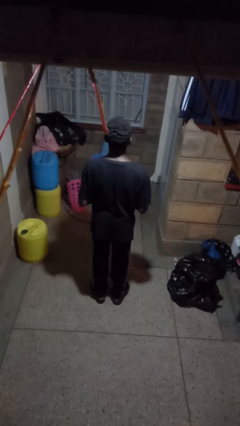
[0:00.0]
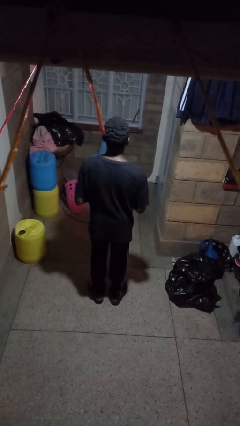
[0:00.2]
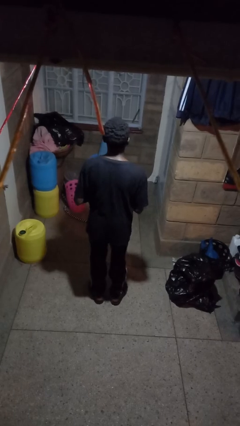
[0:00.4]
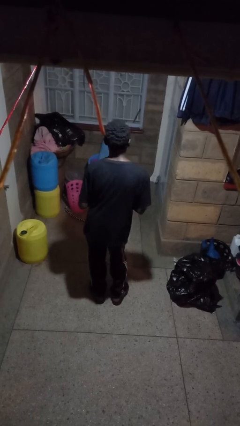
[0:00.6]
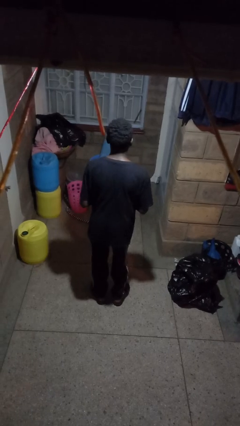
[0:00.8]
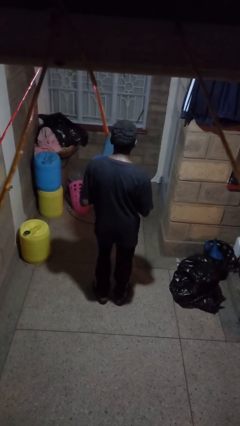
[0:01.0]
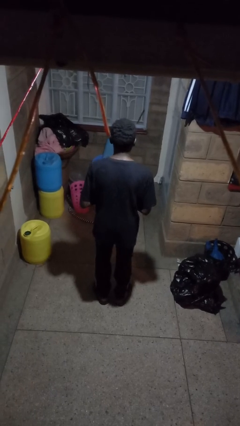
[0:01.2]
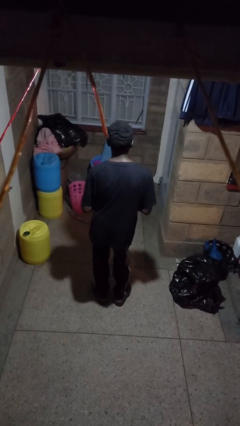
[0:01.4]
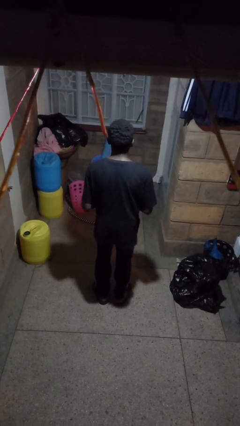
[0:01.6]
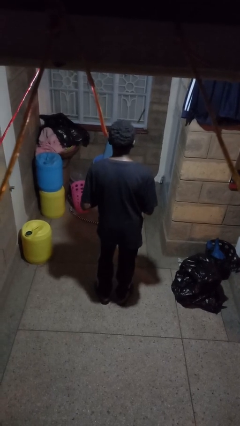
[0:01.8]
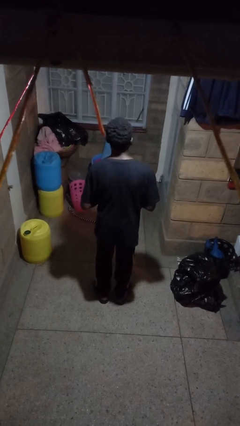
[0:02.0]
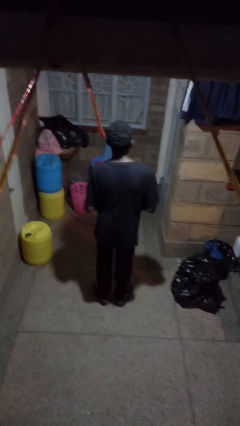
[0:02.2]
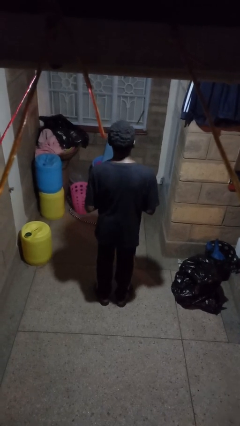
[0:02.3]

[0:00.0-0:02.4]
person wiggles hips

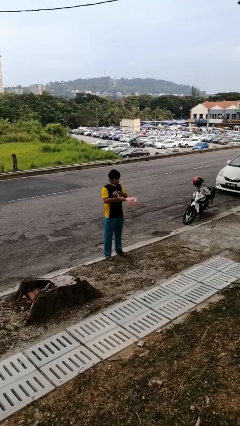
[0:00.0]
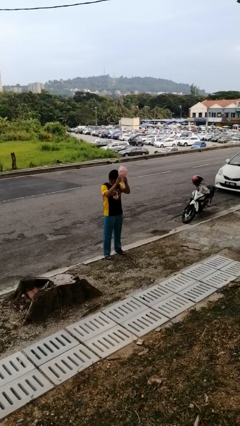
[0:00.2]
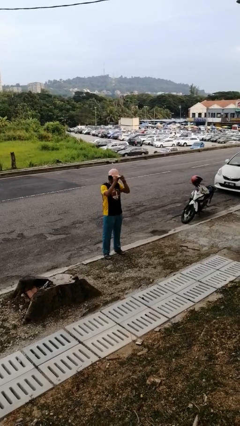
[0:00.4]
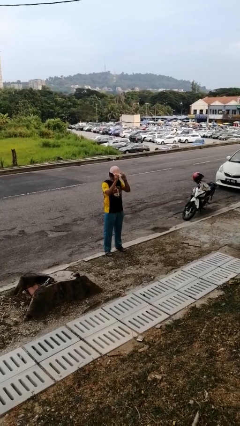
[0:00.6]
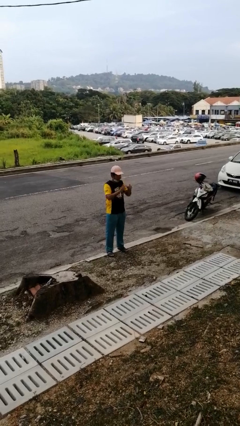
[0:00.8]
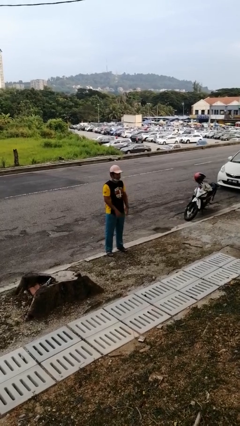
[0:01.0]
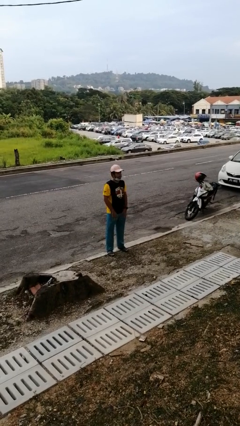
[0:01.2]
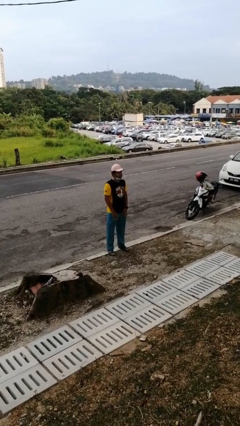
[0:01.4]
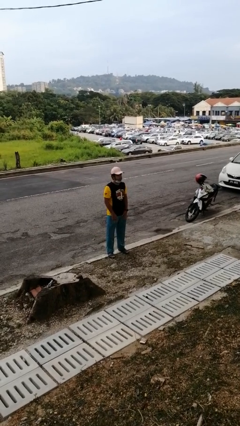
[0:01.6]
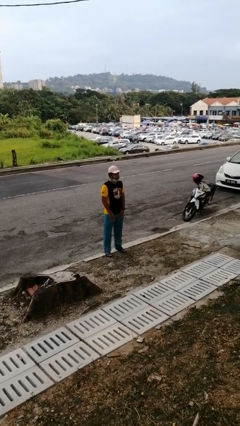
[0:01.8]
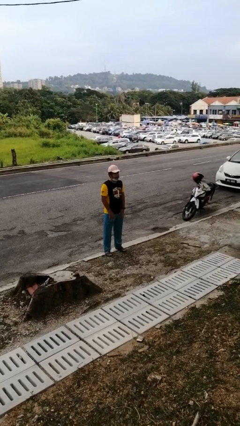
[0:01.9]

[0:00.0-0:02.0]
person puts on hat

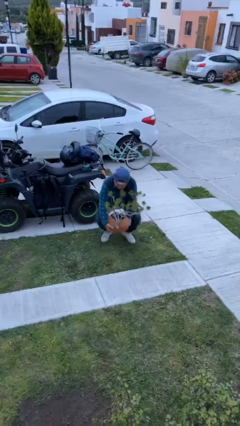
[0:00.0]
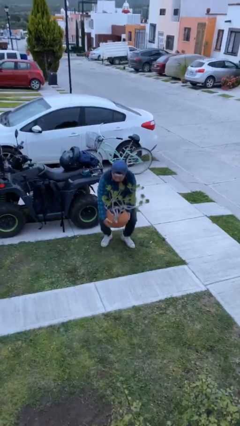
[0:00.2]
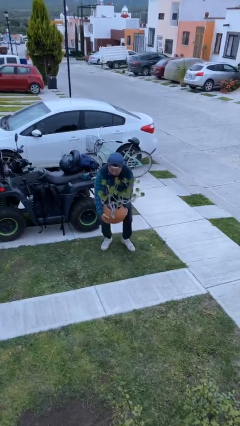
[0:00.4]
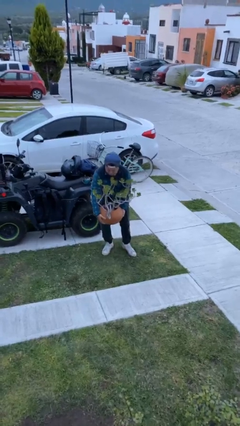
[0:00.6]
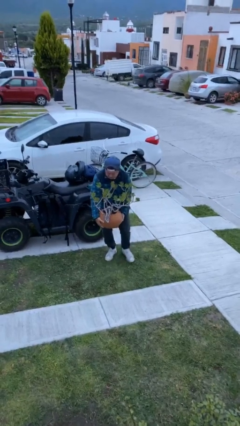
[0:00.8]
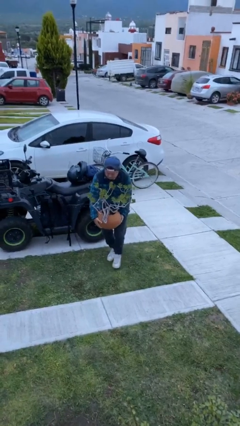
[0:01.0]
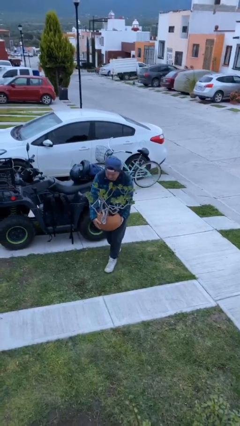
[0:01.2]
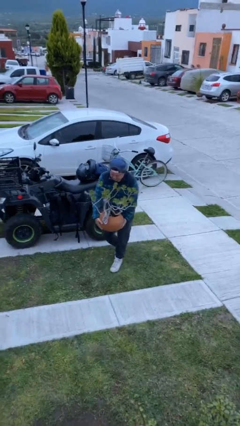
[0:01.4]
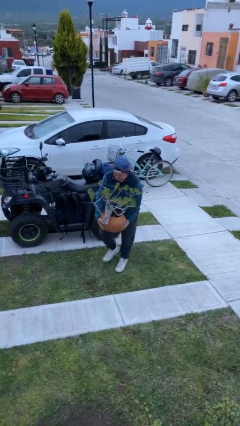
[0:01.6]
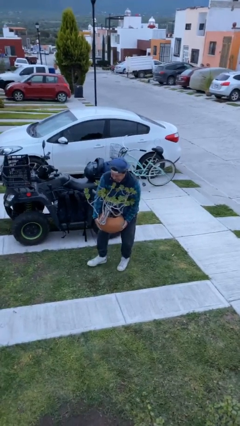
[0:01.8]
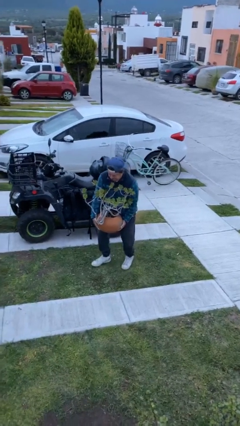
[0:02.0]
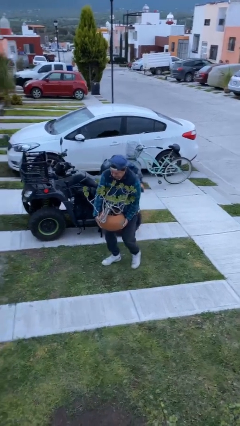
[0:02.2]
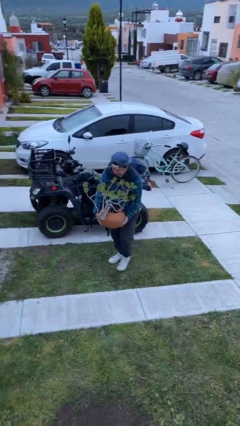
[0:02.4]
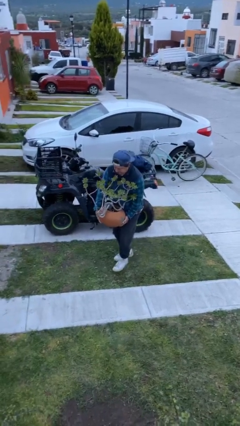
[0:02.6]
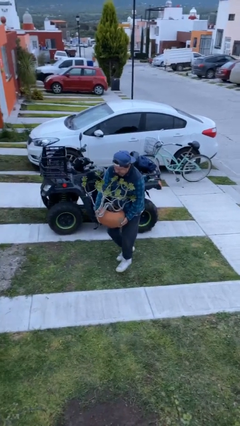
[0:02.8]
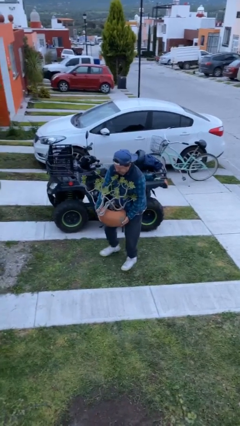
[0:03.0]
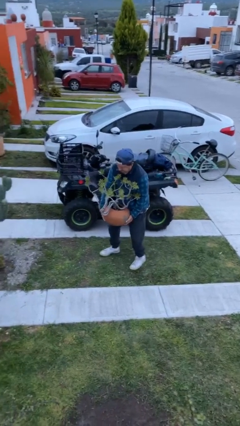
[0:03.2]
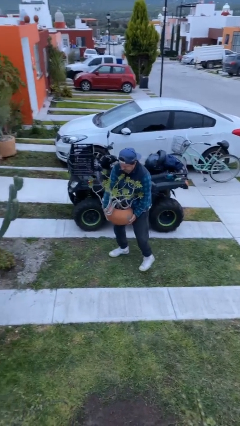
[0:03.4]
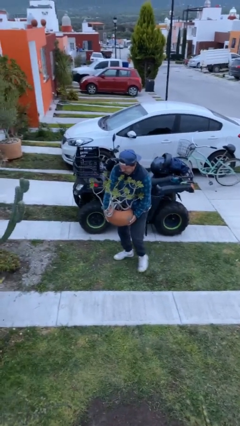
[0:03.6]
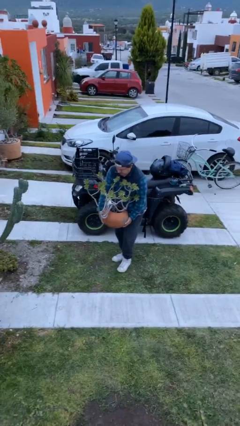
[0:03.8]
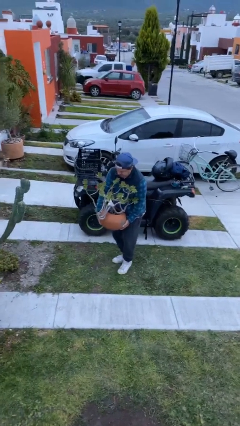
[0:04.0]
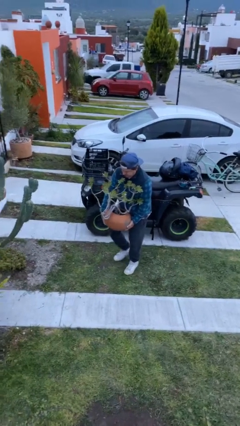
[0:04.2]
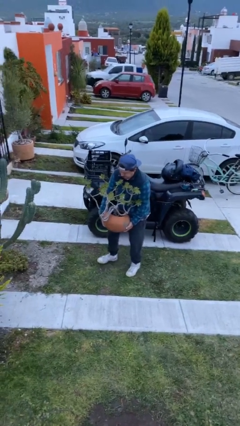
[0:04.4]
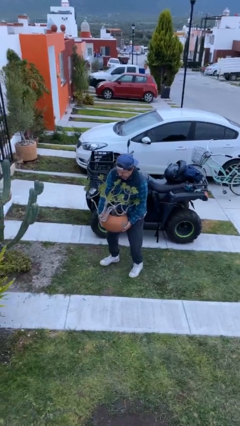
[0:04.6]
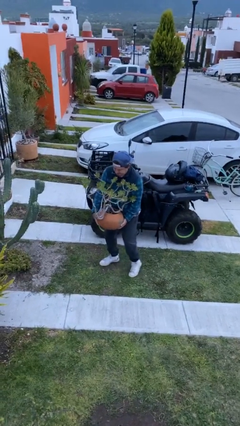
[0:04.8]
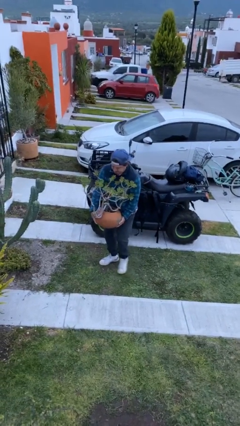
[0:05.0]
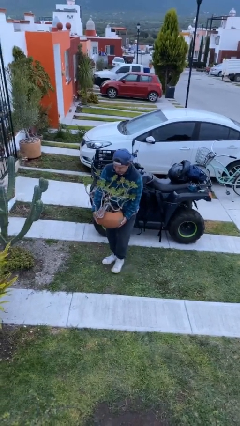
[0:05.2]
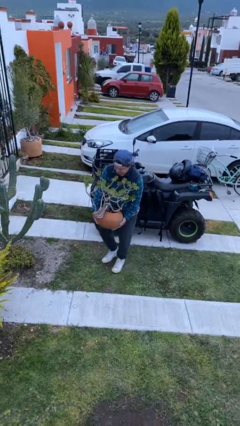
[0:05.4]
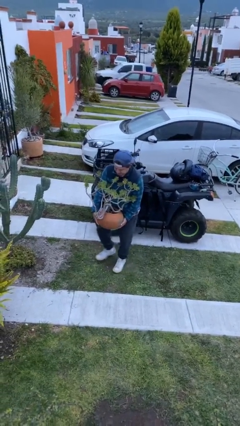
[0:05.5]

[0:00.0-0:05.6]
person carries heavy object

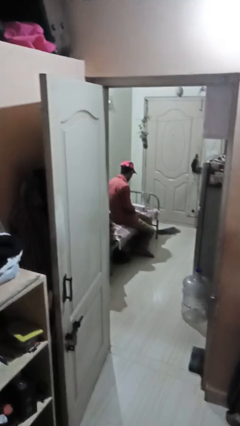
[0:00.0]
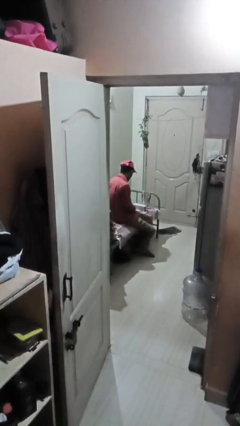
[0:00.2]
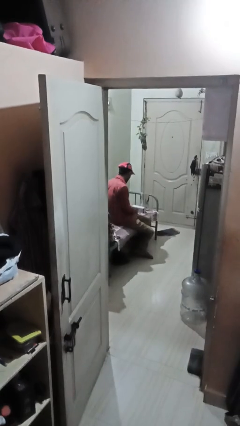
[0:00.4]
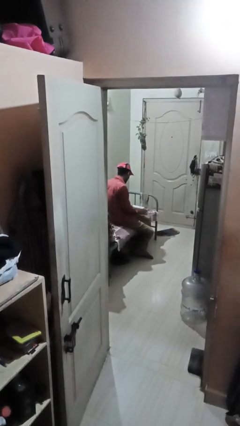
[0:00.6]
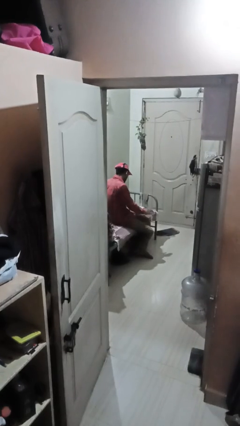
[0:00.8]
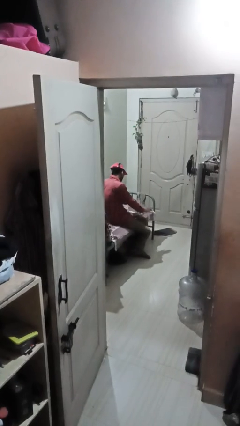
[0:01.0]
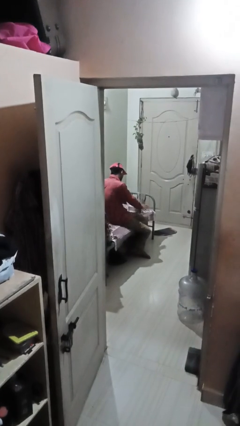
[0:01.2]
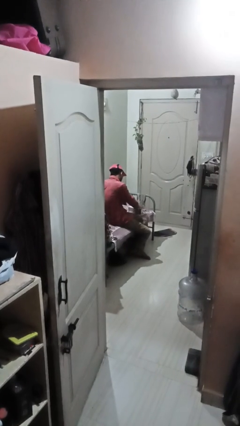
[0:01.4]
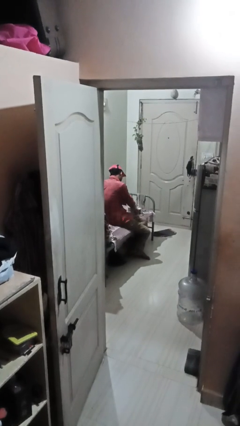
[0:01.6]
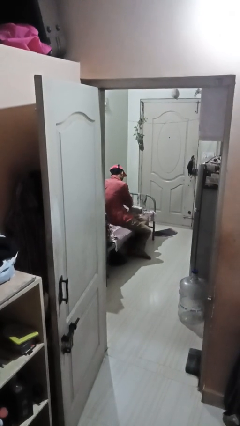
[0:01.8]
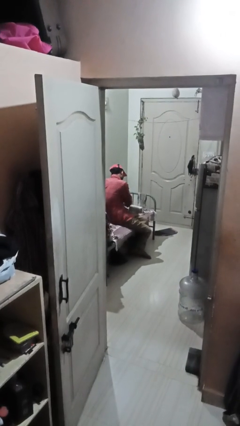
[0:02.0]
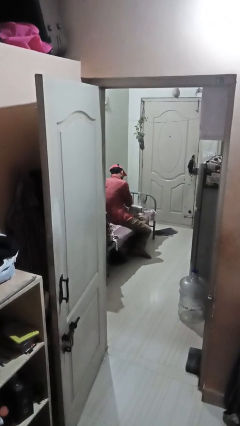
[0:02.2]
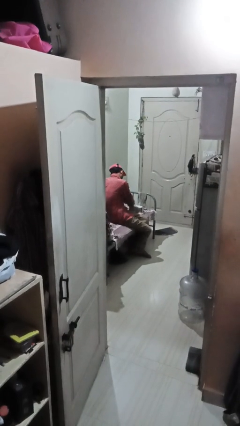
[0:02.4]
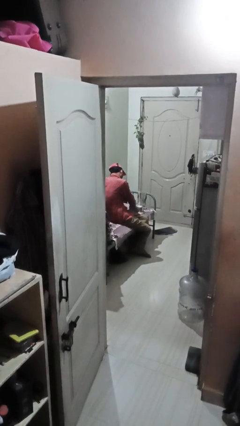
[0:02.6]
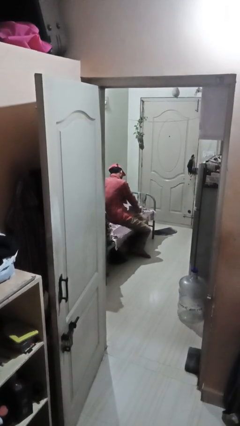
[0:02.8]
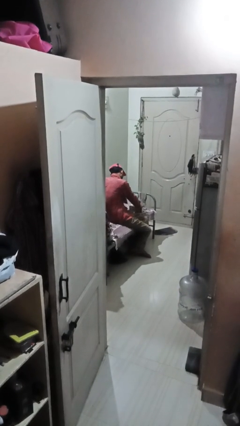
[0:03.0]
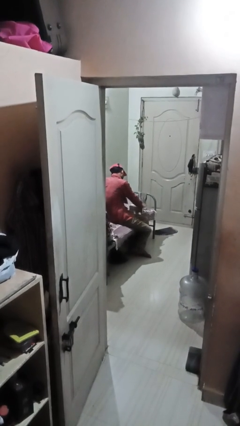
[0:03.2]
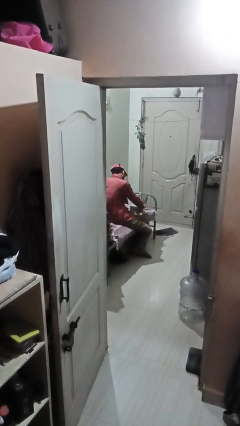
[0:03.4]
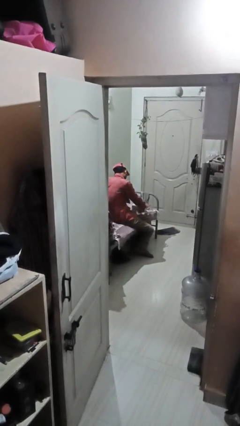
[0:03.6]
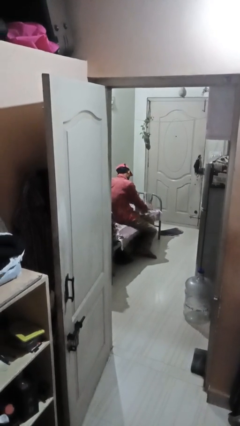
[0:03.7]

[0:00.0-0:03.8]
person waves hand over object

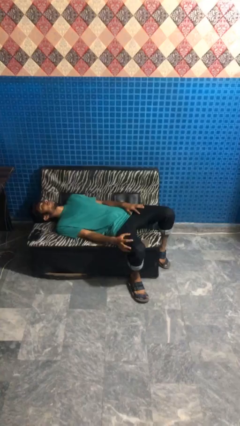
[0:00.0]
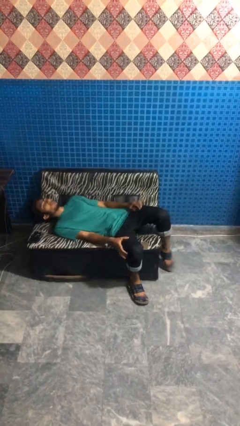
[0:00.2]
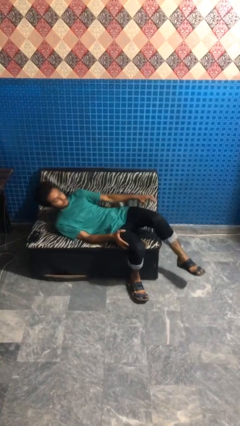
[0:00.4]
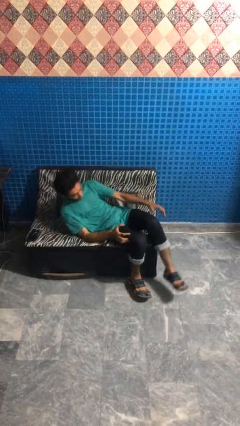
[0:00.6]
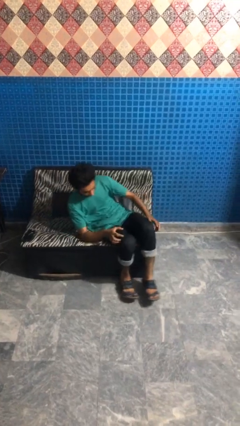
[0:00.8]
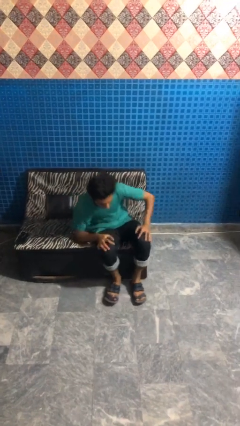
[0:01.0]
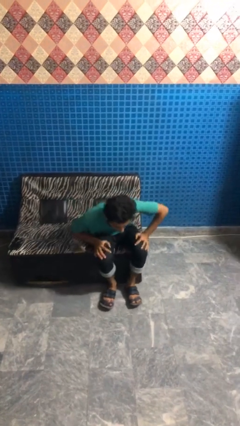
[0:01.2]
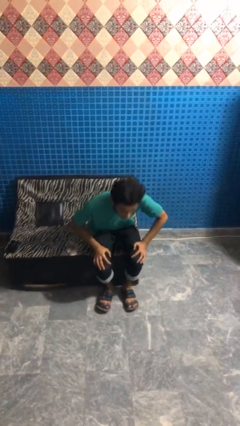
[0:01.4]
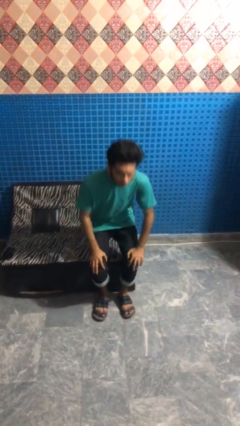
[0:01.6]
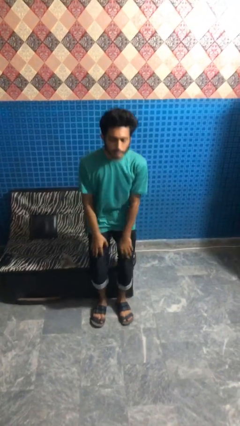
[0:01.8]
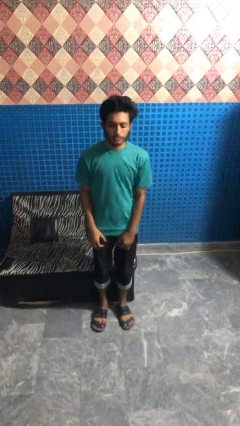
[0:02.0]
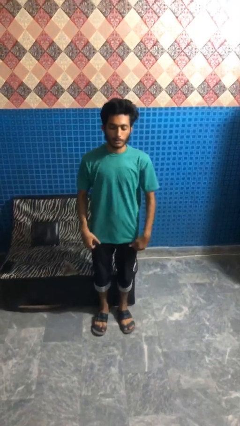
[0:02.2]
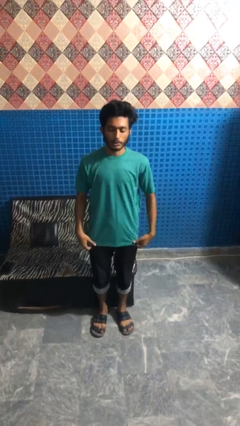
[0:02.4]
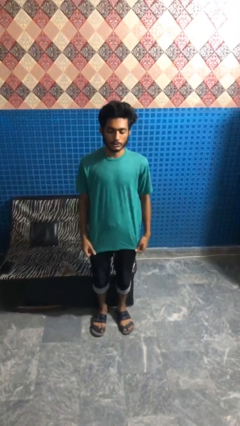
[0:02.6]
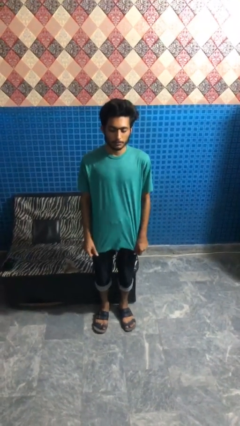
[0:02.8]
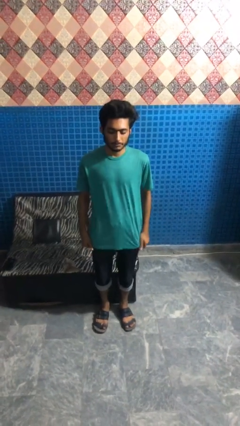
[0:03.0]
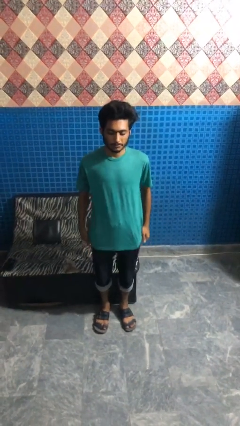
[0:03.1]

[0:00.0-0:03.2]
person stands up

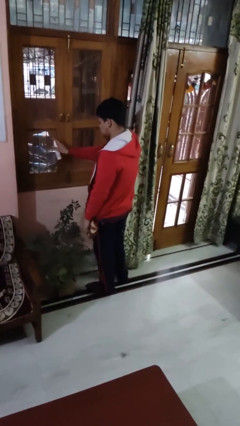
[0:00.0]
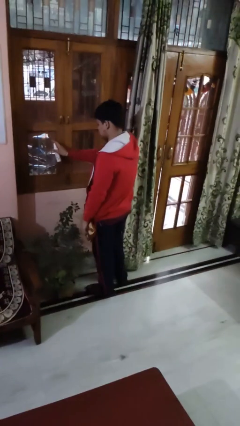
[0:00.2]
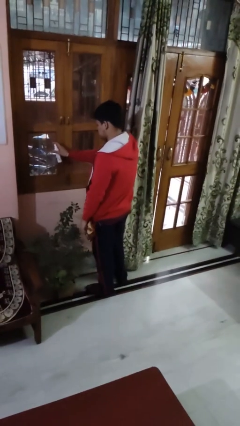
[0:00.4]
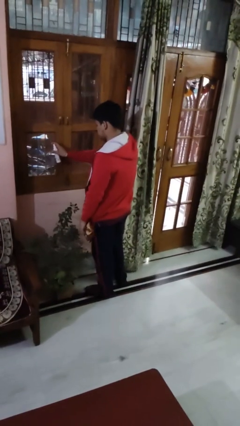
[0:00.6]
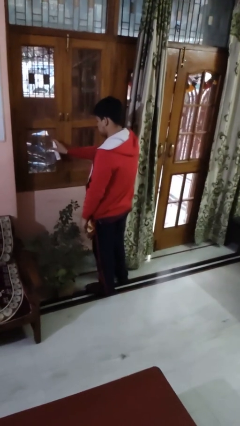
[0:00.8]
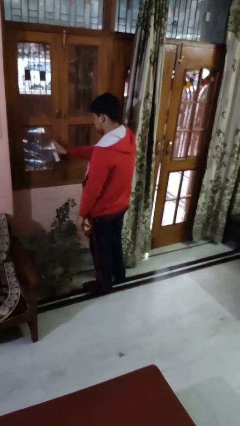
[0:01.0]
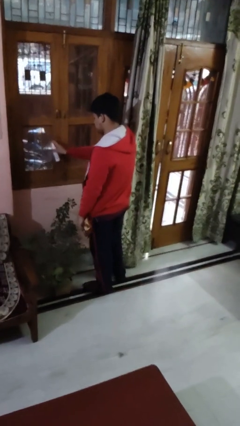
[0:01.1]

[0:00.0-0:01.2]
person sprays from bottle
